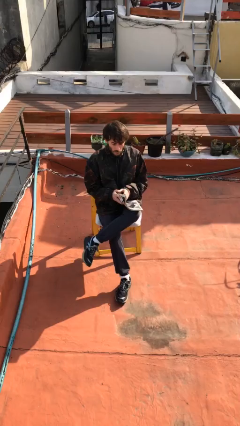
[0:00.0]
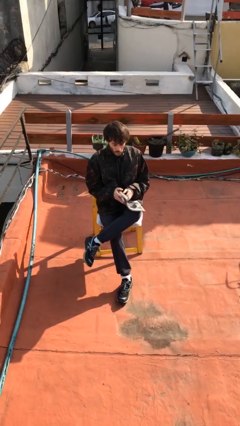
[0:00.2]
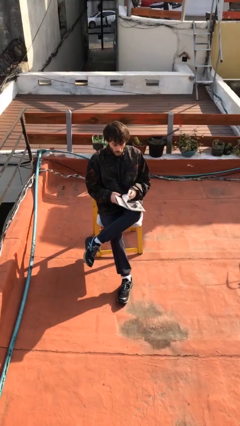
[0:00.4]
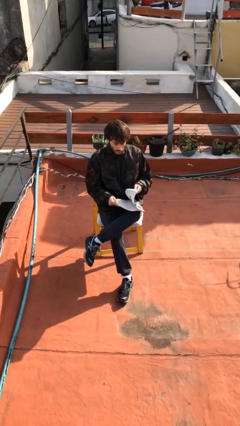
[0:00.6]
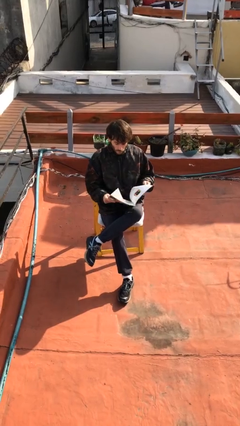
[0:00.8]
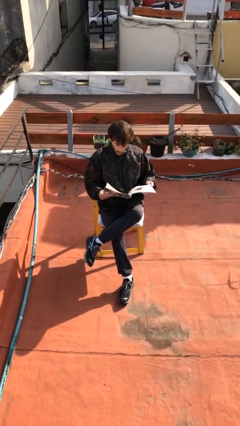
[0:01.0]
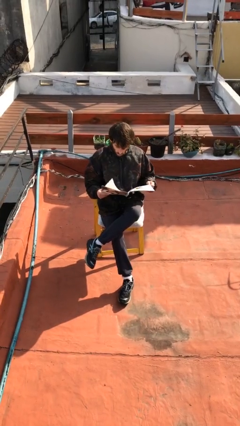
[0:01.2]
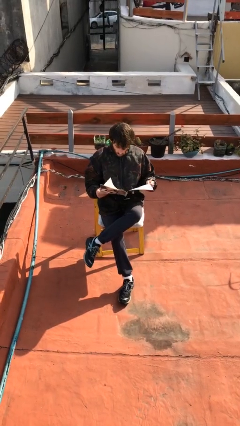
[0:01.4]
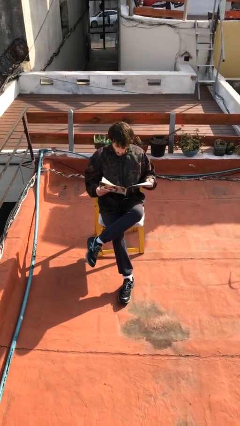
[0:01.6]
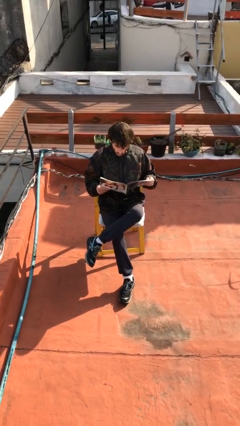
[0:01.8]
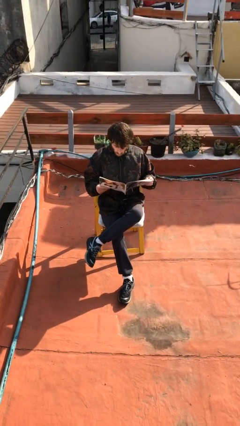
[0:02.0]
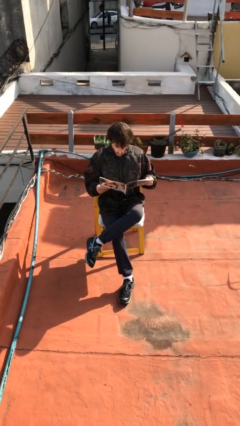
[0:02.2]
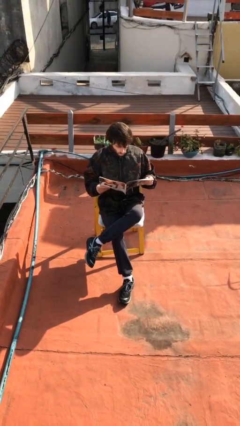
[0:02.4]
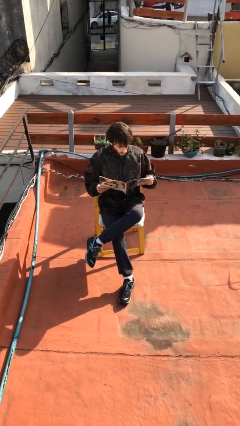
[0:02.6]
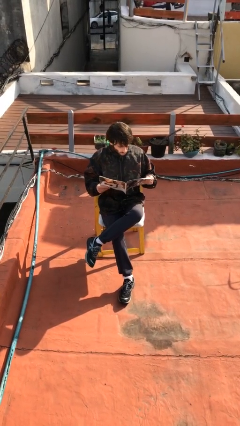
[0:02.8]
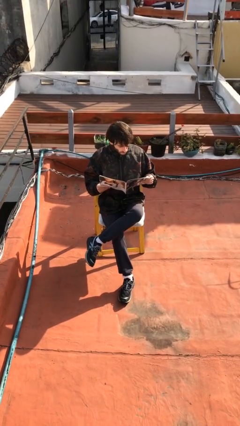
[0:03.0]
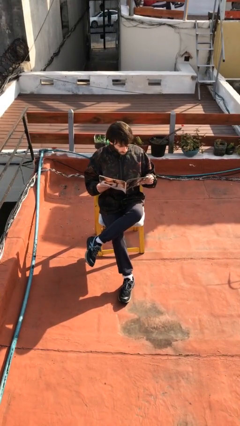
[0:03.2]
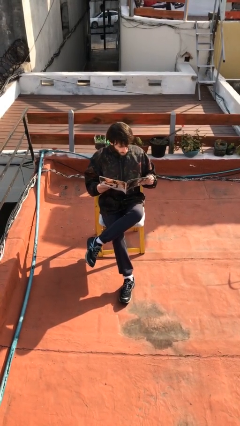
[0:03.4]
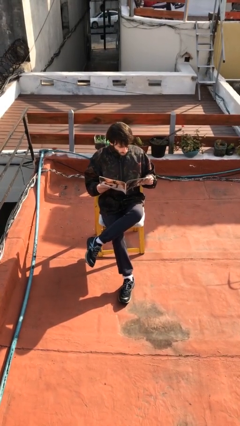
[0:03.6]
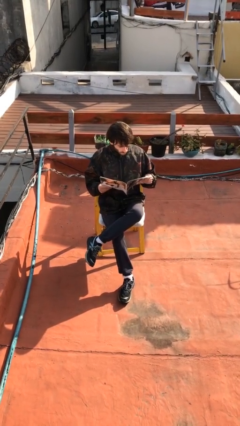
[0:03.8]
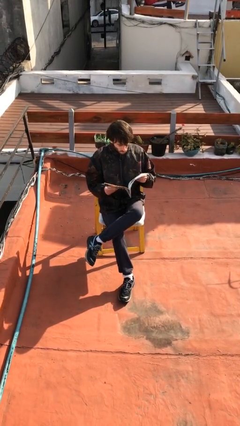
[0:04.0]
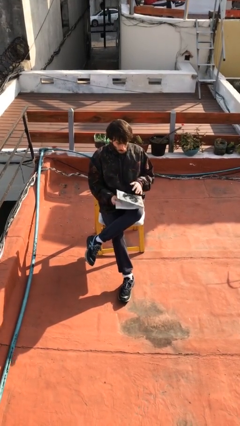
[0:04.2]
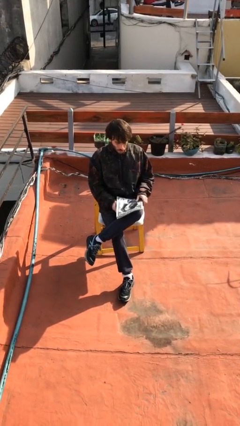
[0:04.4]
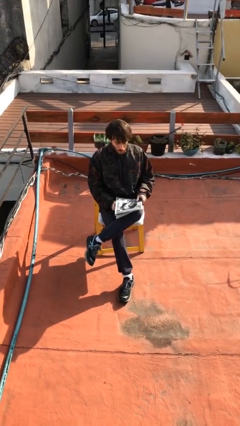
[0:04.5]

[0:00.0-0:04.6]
person reads magazine

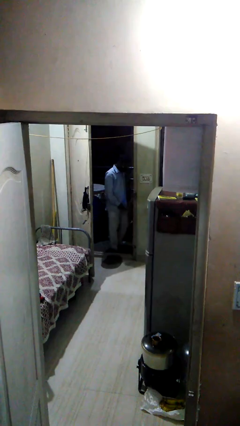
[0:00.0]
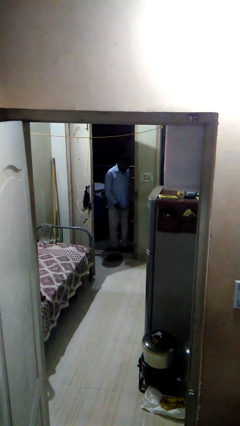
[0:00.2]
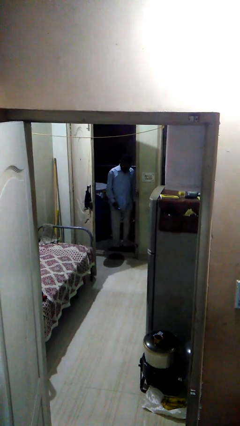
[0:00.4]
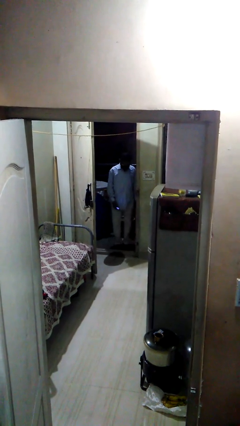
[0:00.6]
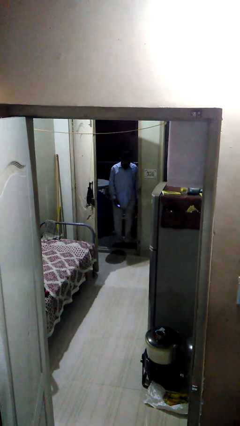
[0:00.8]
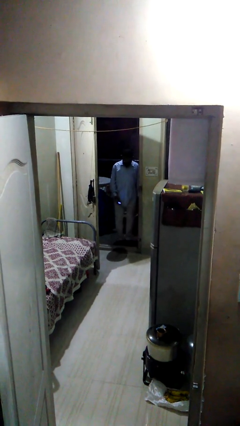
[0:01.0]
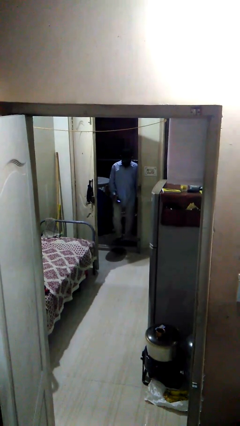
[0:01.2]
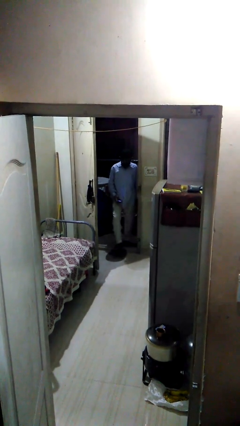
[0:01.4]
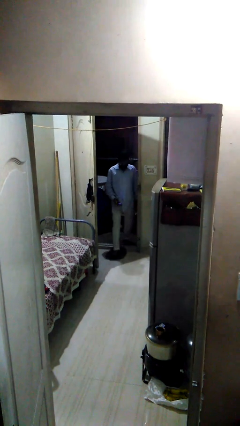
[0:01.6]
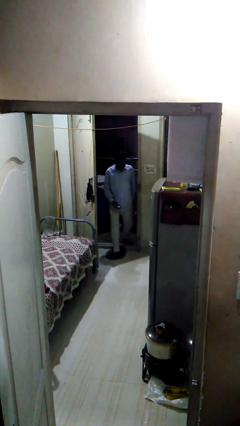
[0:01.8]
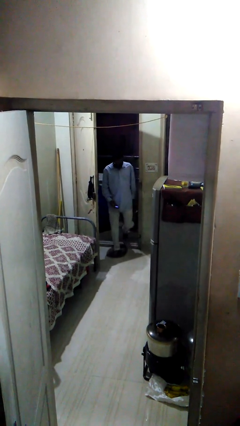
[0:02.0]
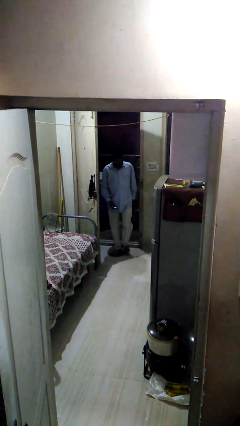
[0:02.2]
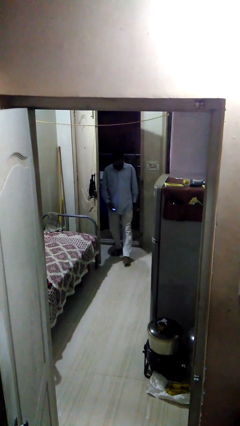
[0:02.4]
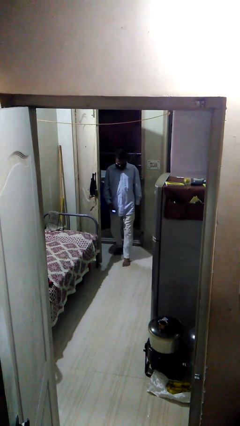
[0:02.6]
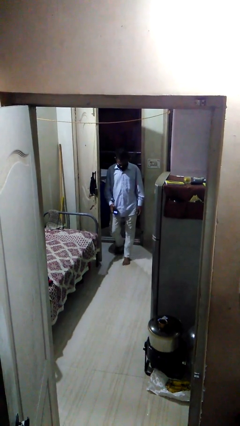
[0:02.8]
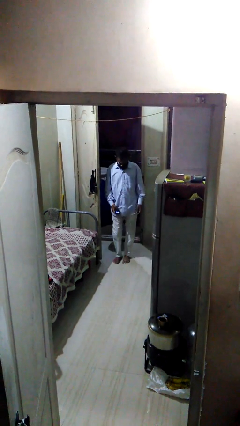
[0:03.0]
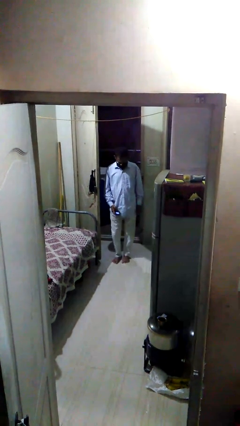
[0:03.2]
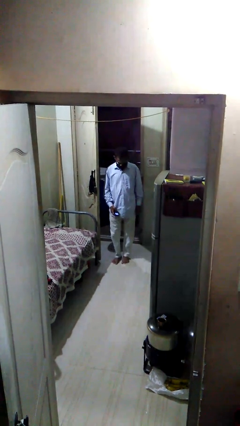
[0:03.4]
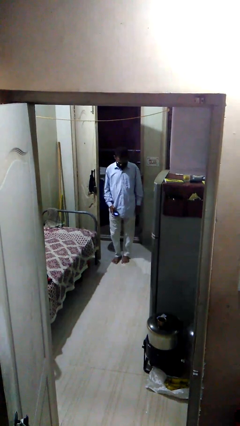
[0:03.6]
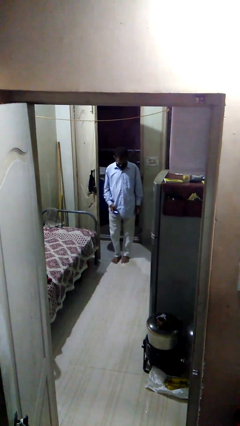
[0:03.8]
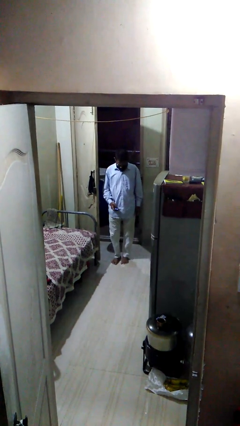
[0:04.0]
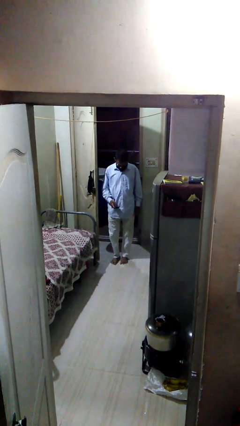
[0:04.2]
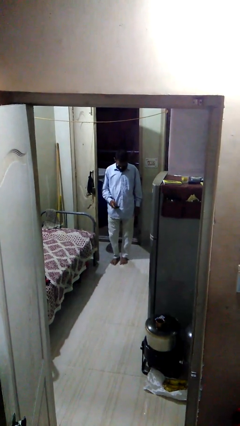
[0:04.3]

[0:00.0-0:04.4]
person enters scene through structure

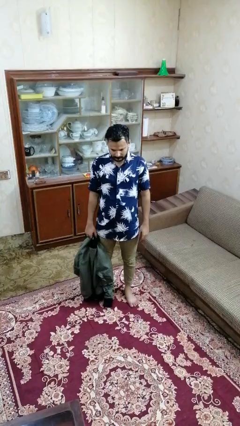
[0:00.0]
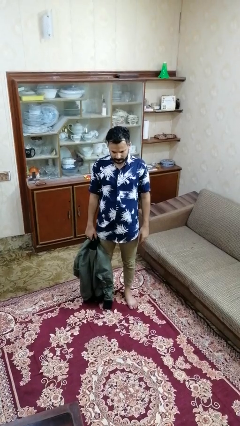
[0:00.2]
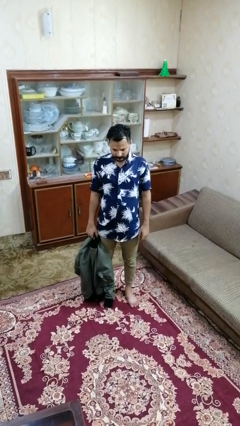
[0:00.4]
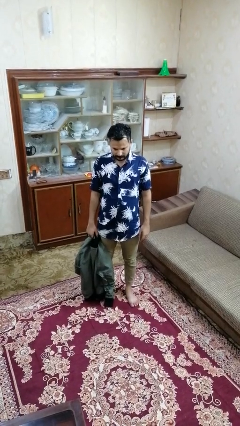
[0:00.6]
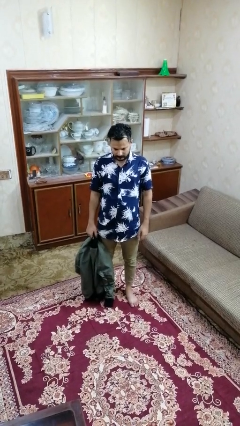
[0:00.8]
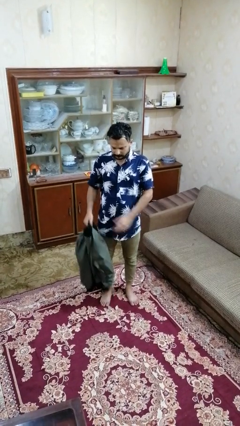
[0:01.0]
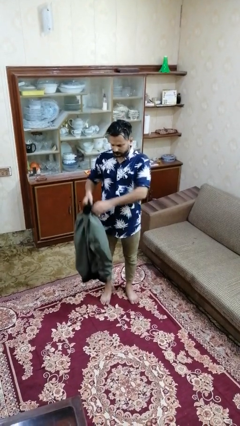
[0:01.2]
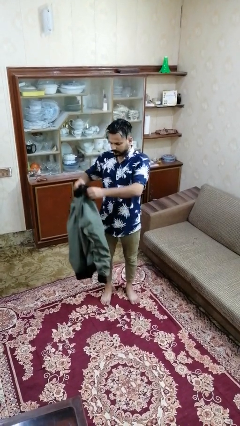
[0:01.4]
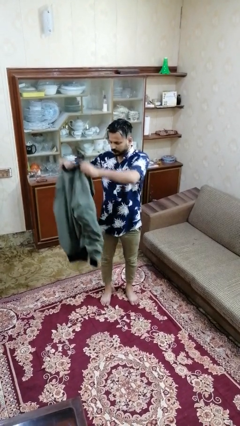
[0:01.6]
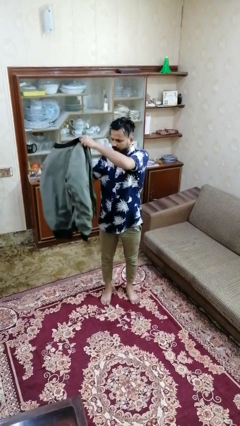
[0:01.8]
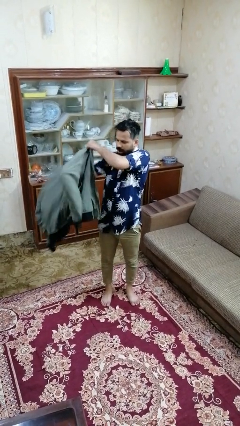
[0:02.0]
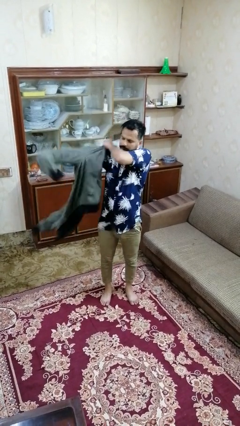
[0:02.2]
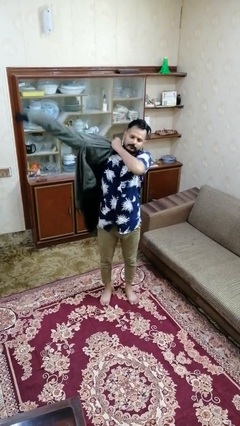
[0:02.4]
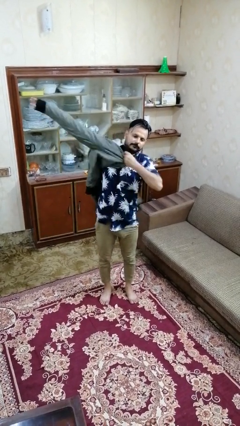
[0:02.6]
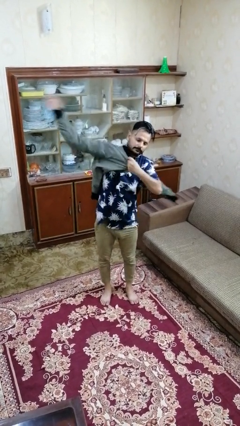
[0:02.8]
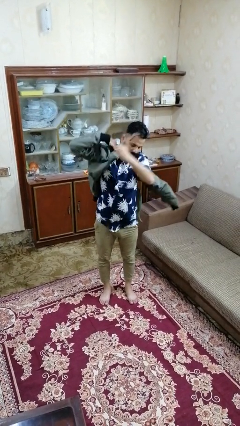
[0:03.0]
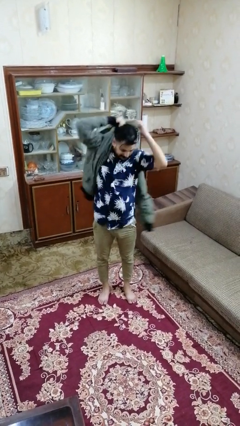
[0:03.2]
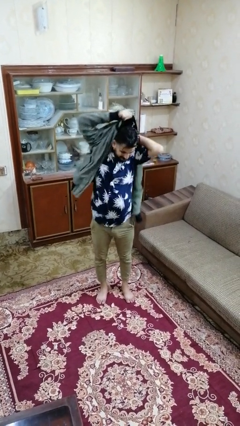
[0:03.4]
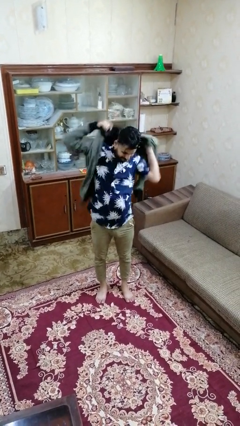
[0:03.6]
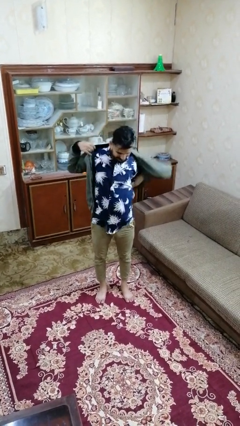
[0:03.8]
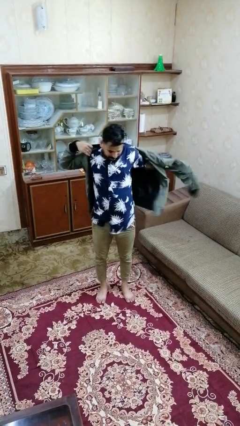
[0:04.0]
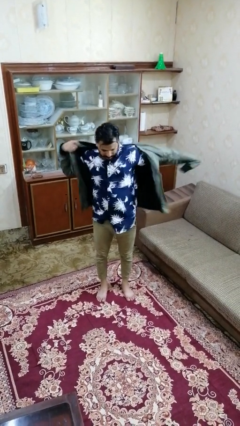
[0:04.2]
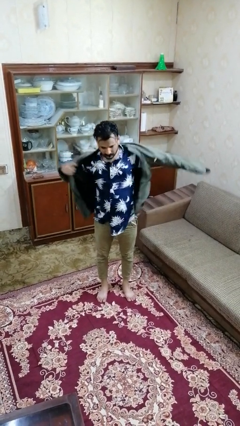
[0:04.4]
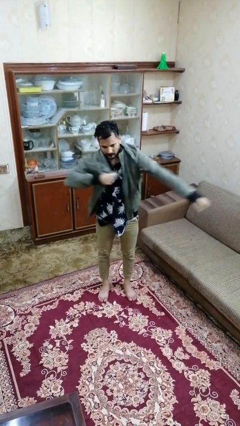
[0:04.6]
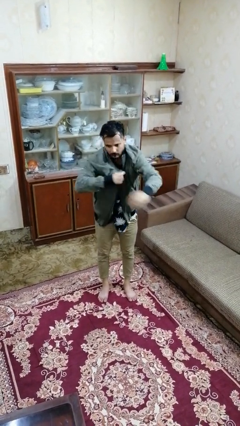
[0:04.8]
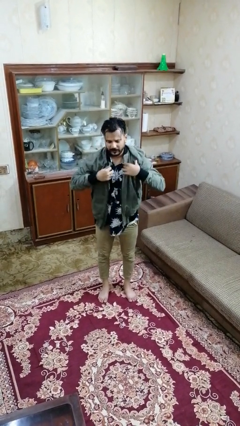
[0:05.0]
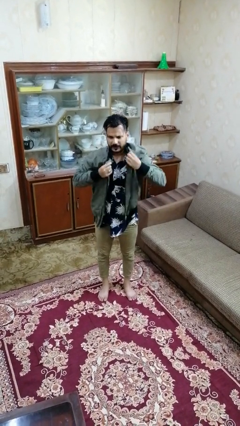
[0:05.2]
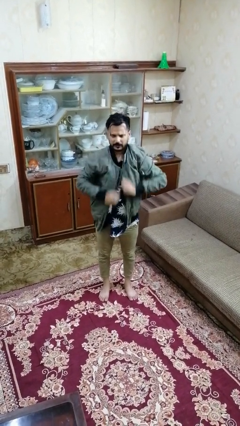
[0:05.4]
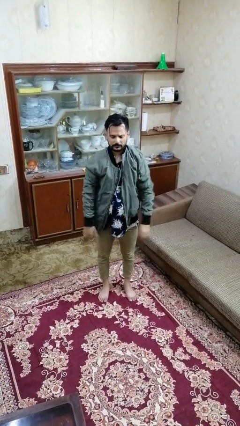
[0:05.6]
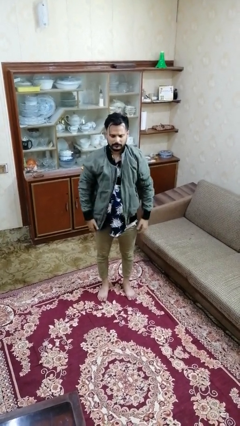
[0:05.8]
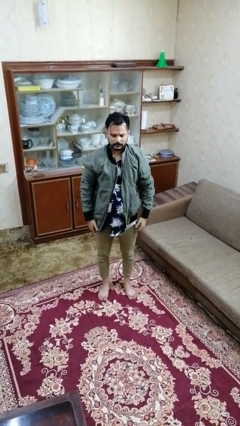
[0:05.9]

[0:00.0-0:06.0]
person puts on jacket

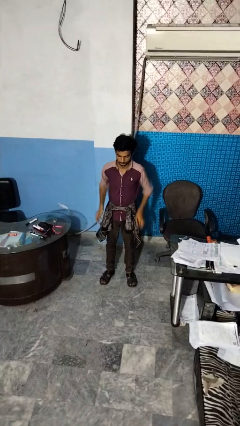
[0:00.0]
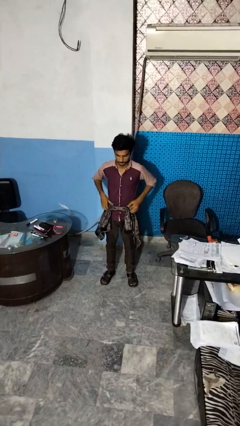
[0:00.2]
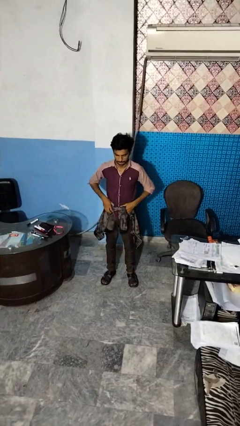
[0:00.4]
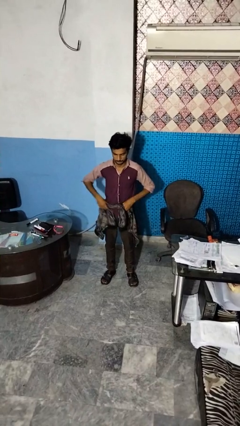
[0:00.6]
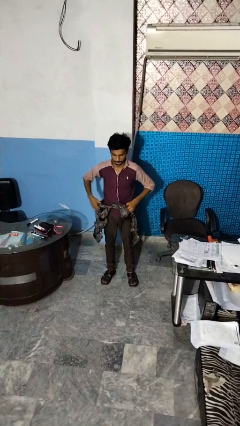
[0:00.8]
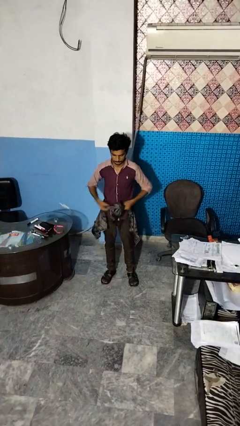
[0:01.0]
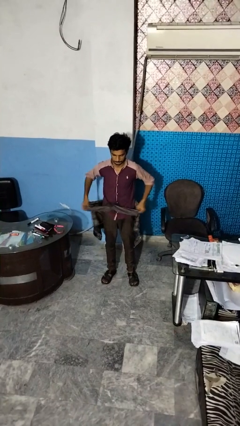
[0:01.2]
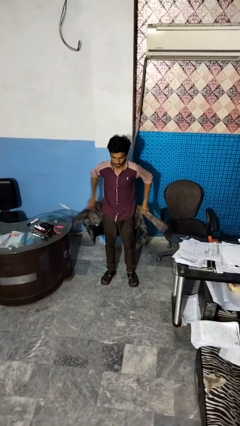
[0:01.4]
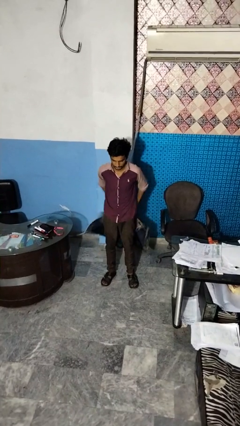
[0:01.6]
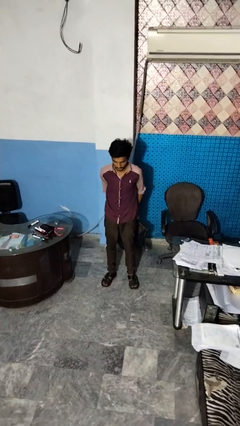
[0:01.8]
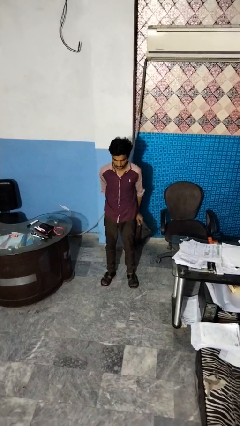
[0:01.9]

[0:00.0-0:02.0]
person unties jacket around waist

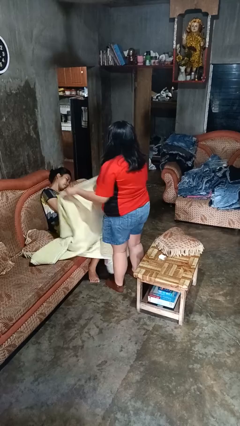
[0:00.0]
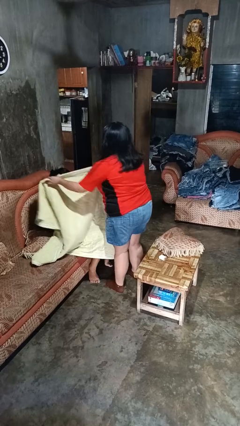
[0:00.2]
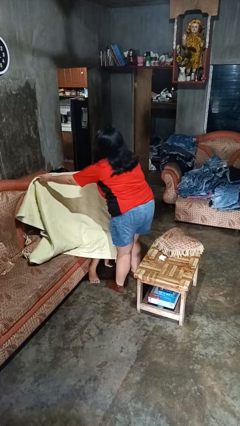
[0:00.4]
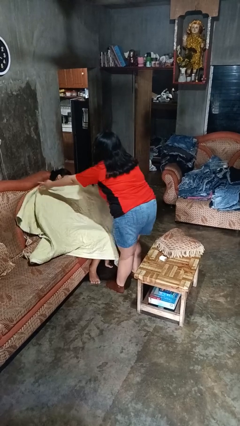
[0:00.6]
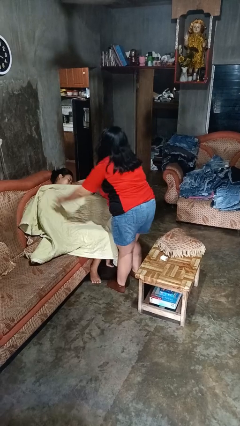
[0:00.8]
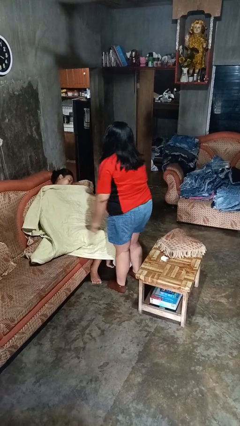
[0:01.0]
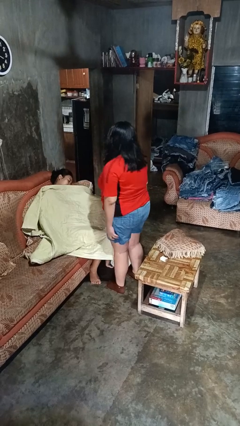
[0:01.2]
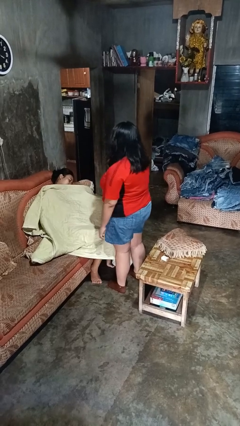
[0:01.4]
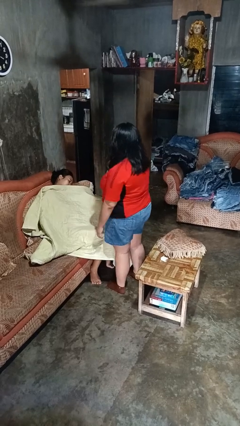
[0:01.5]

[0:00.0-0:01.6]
person covers friend with blanket
